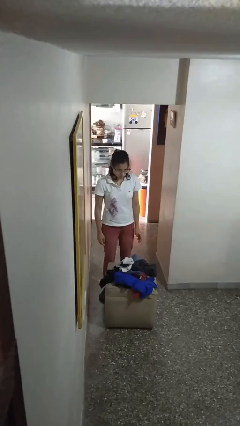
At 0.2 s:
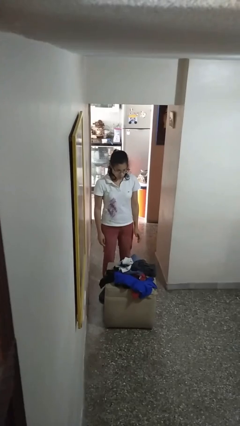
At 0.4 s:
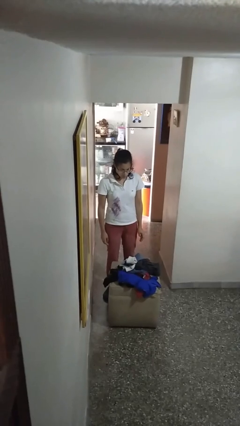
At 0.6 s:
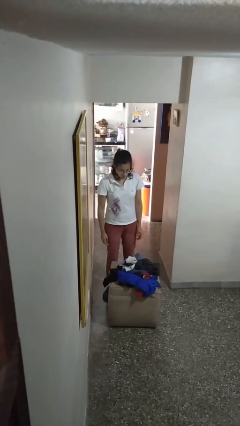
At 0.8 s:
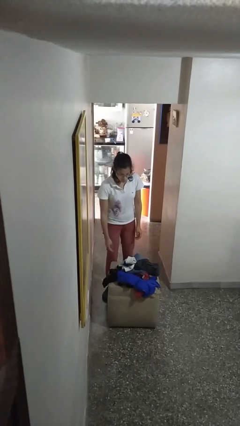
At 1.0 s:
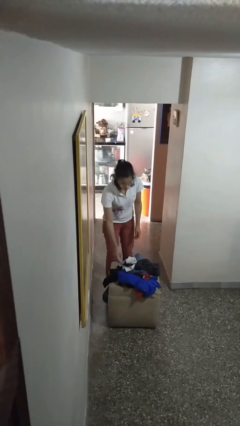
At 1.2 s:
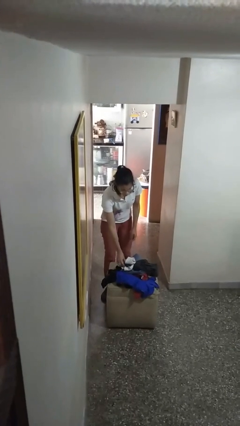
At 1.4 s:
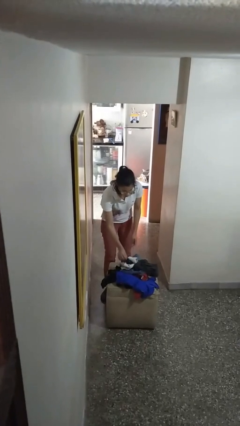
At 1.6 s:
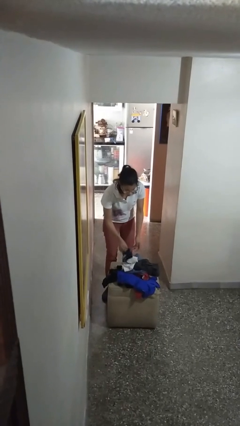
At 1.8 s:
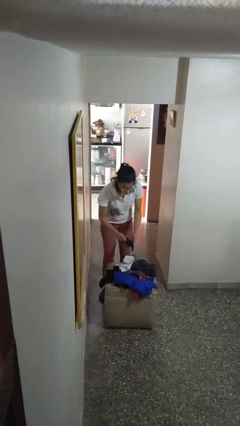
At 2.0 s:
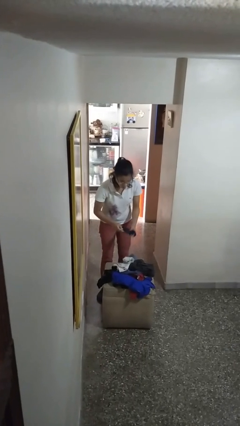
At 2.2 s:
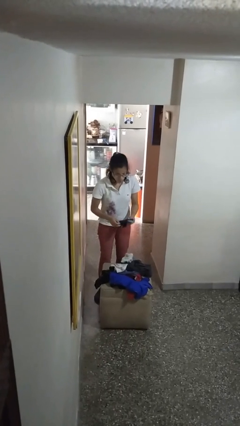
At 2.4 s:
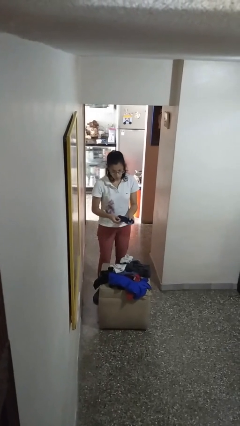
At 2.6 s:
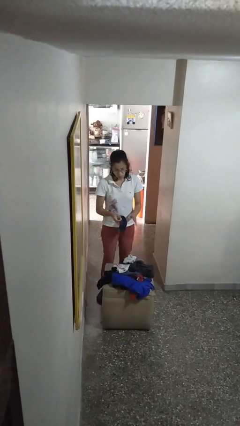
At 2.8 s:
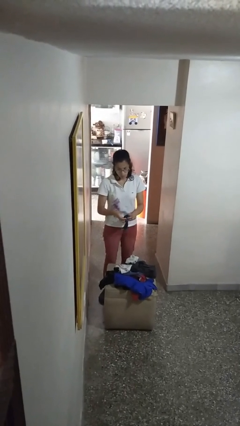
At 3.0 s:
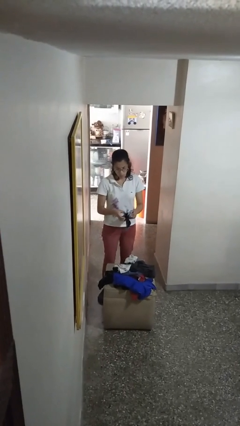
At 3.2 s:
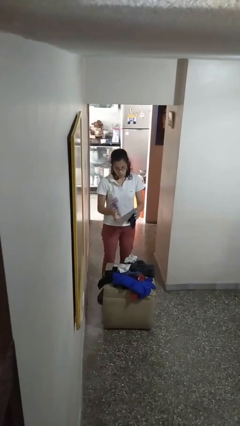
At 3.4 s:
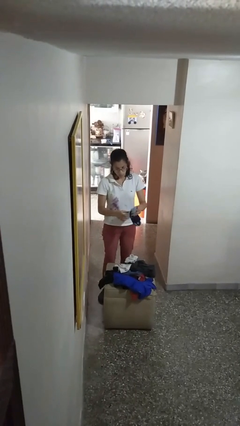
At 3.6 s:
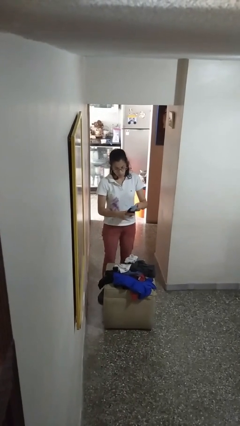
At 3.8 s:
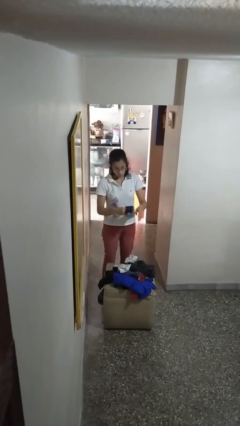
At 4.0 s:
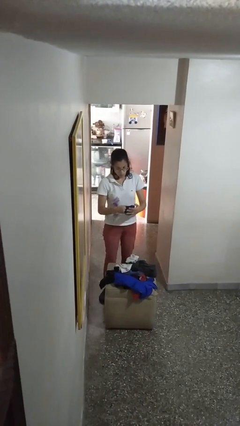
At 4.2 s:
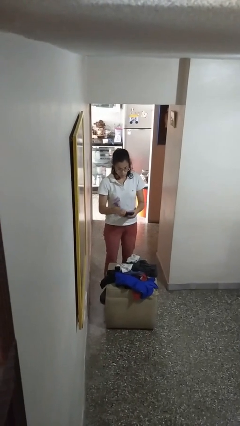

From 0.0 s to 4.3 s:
person folds socks

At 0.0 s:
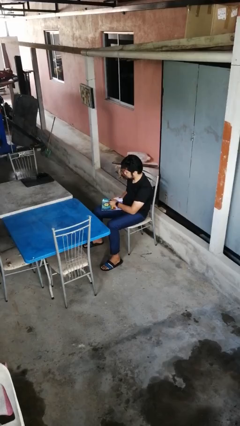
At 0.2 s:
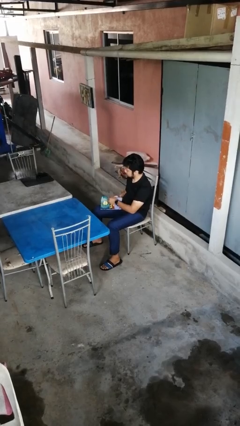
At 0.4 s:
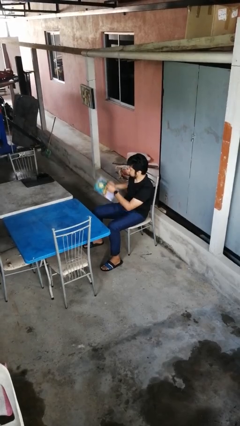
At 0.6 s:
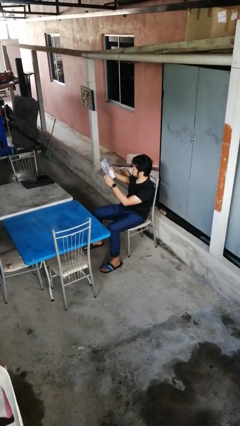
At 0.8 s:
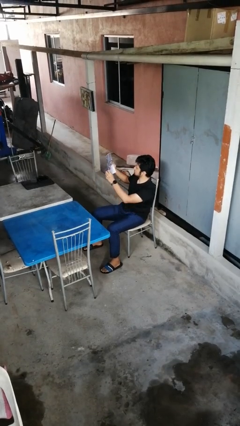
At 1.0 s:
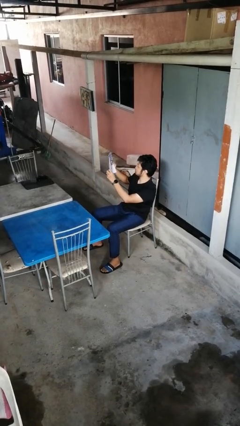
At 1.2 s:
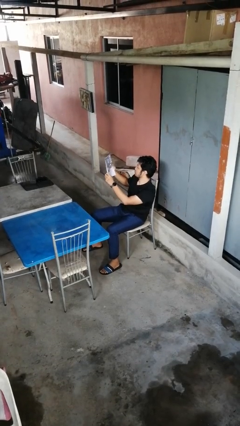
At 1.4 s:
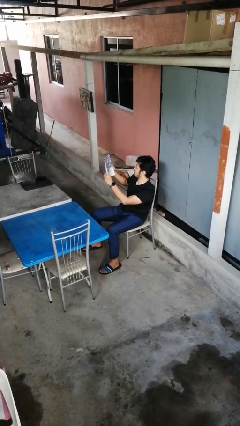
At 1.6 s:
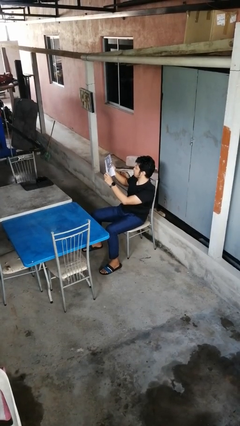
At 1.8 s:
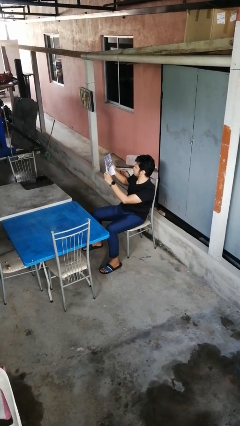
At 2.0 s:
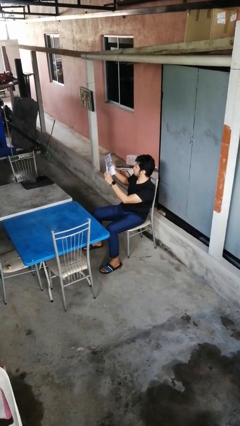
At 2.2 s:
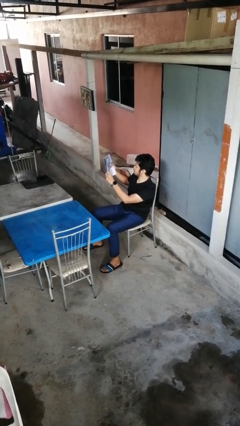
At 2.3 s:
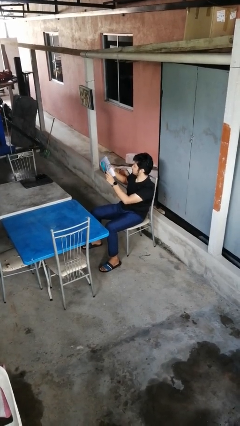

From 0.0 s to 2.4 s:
person reads magazine

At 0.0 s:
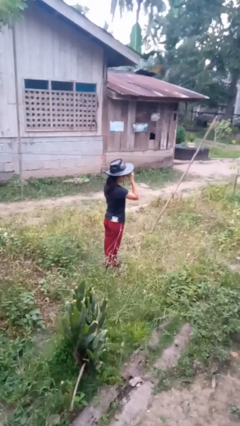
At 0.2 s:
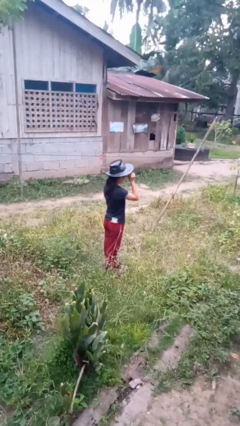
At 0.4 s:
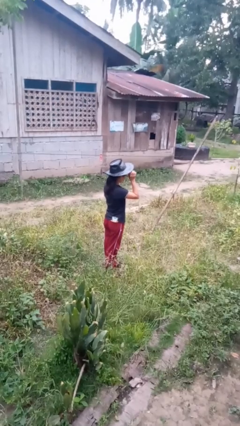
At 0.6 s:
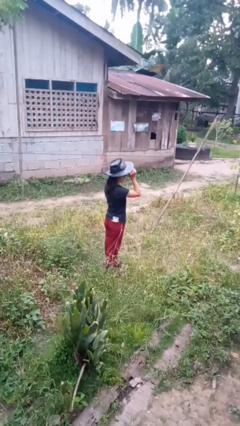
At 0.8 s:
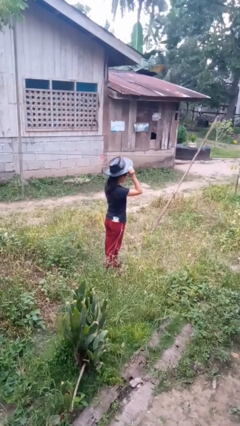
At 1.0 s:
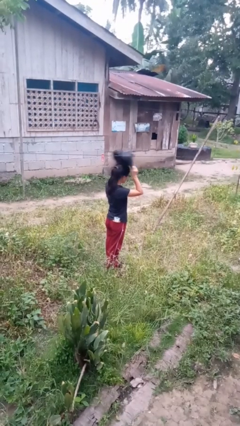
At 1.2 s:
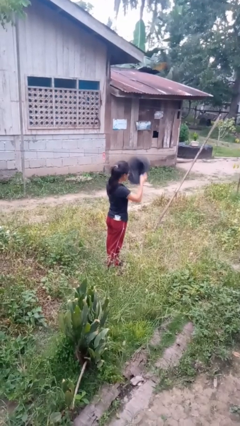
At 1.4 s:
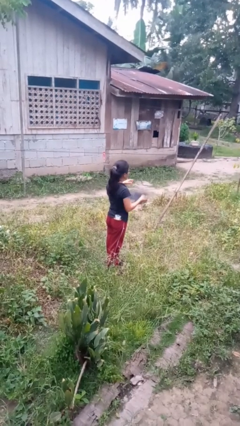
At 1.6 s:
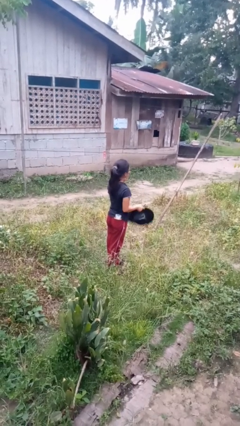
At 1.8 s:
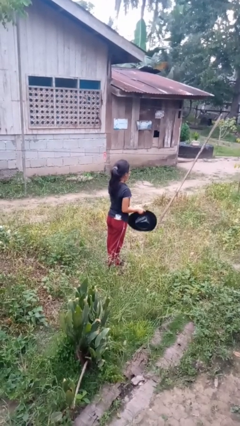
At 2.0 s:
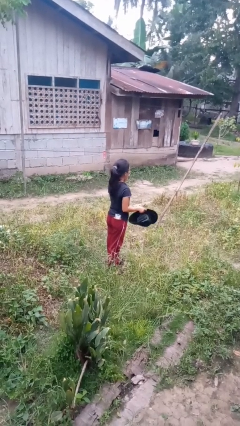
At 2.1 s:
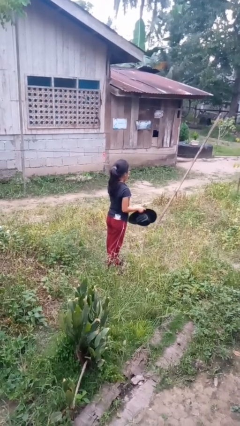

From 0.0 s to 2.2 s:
person takes off hat

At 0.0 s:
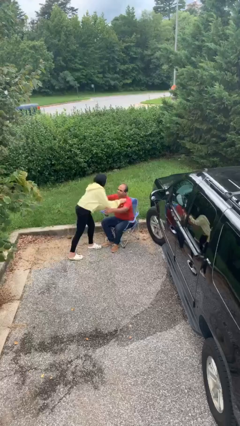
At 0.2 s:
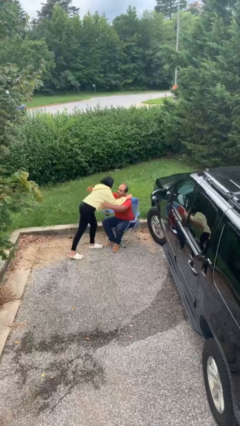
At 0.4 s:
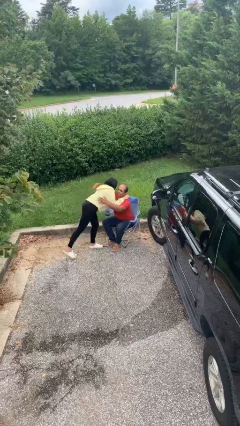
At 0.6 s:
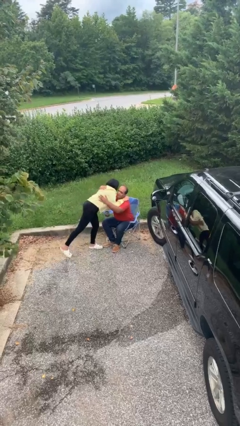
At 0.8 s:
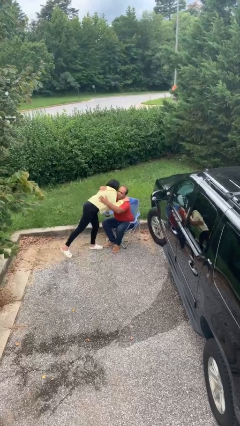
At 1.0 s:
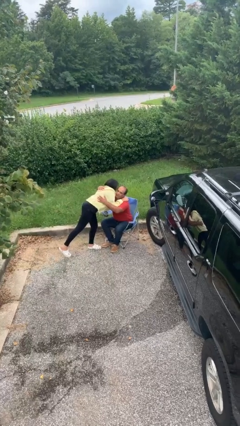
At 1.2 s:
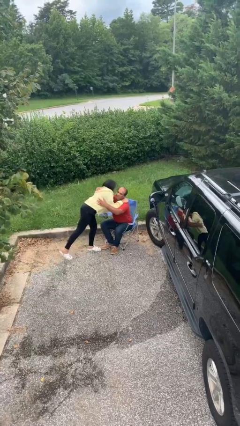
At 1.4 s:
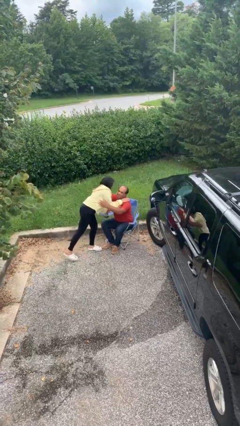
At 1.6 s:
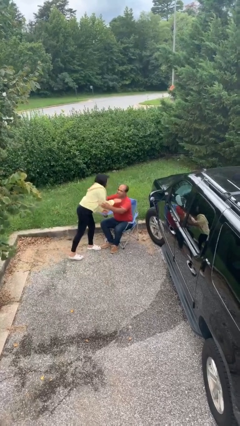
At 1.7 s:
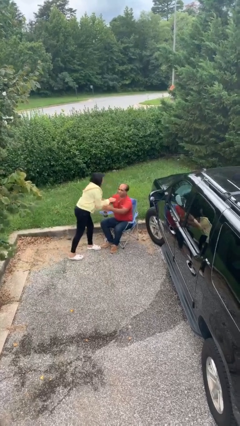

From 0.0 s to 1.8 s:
person embraces person

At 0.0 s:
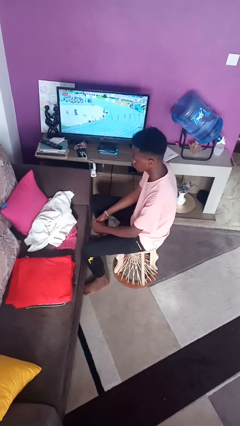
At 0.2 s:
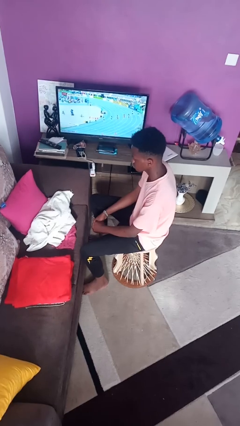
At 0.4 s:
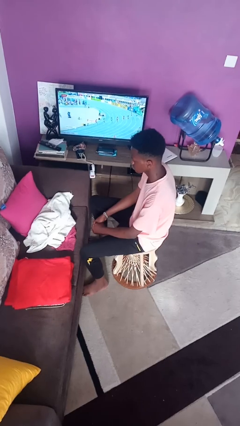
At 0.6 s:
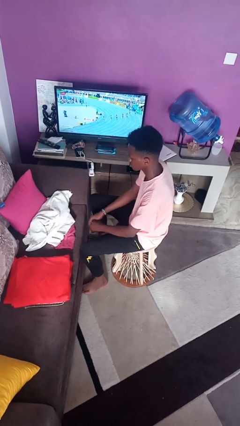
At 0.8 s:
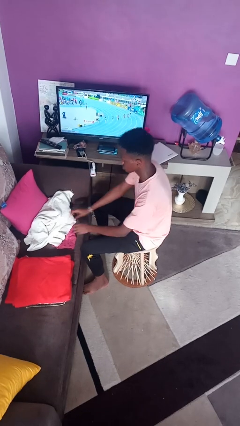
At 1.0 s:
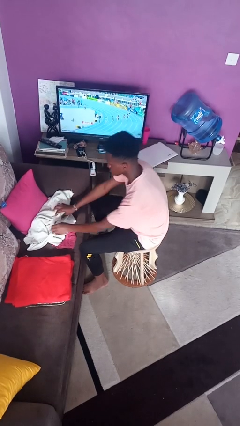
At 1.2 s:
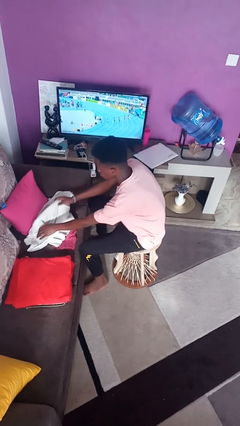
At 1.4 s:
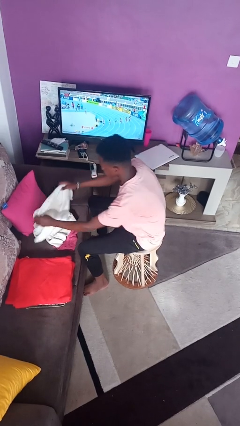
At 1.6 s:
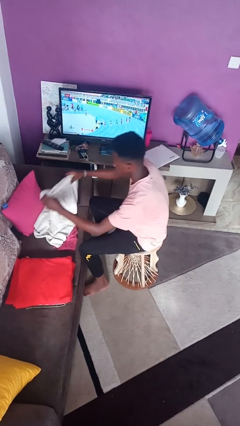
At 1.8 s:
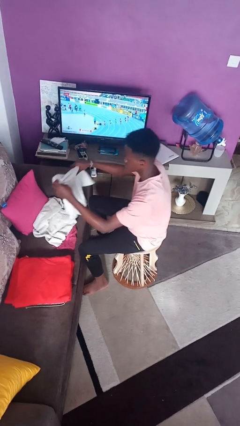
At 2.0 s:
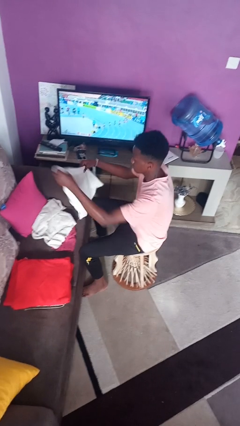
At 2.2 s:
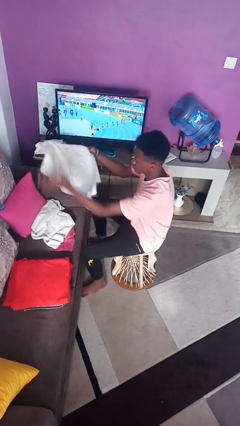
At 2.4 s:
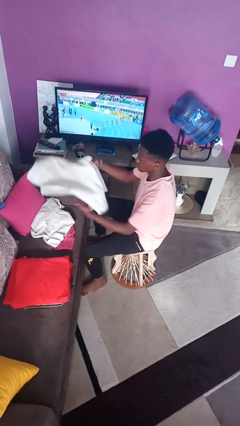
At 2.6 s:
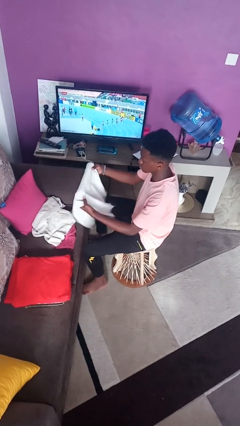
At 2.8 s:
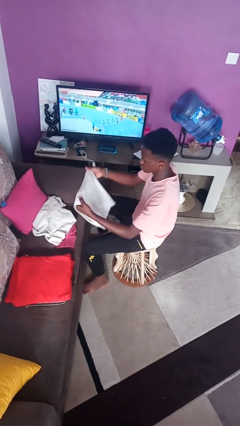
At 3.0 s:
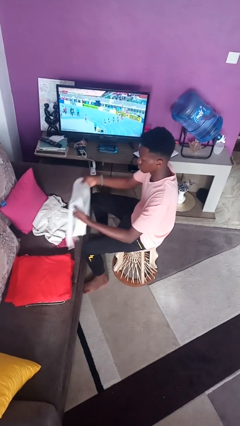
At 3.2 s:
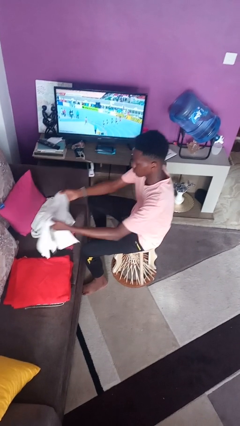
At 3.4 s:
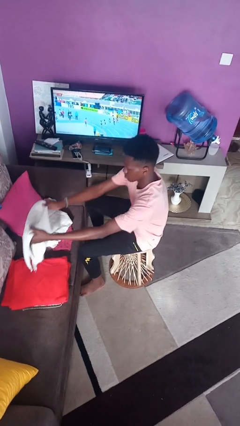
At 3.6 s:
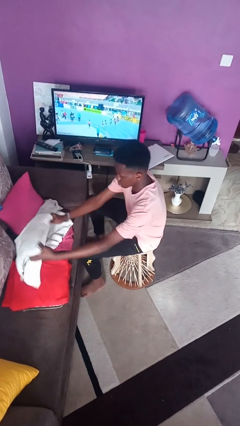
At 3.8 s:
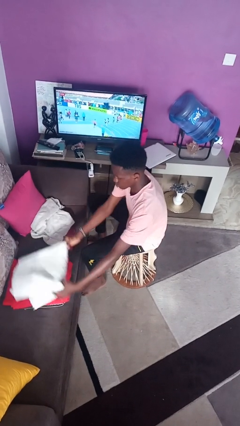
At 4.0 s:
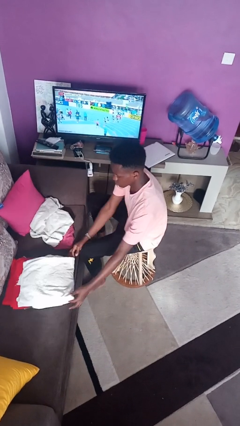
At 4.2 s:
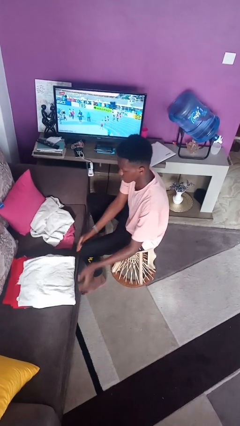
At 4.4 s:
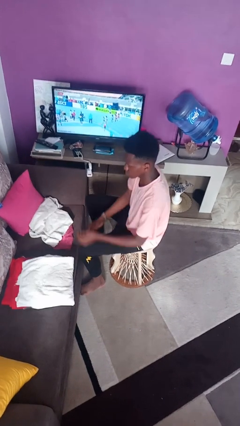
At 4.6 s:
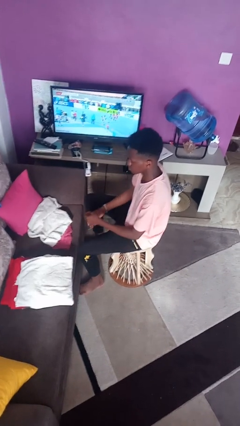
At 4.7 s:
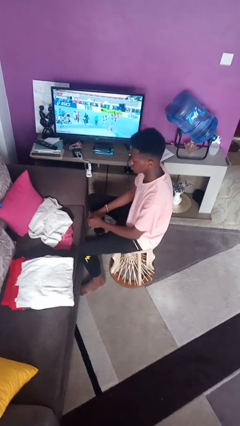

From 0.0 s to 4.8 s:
person folds towel

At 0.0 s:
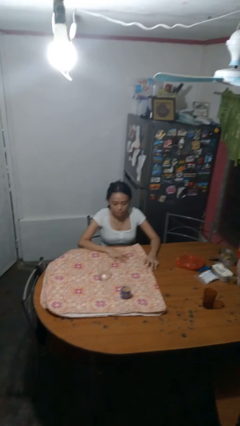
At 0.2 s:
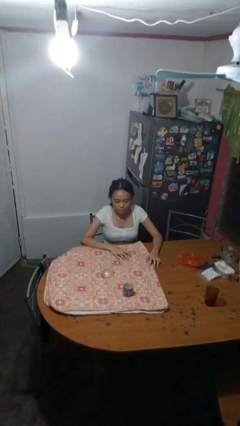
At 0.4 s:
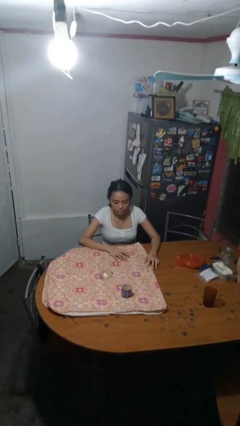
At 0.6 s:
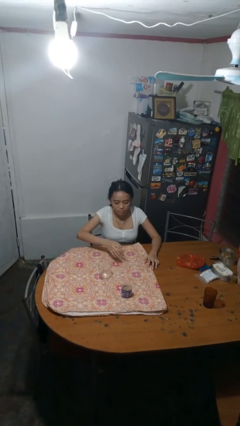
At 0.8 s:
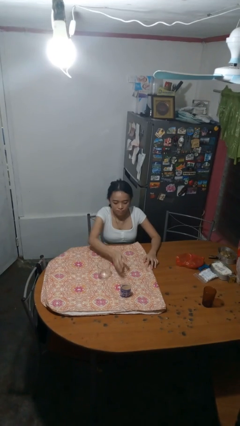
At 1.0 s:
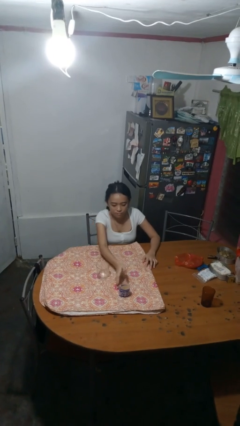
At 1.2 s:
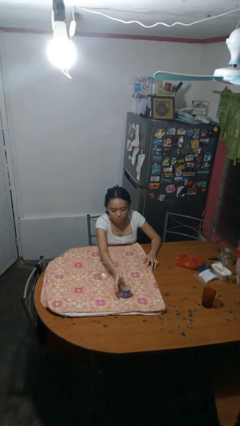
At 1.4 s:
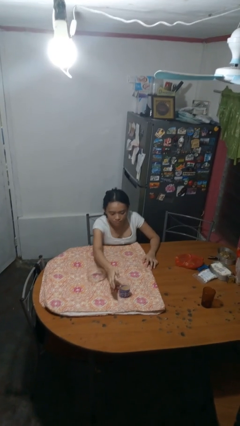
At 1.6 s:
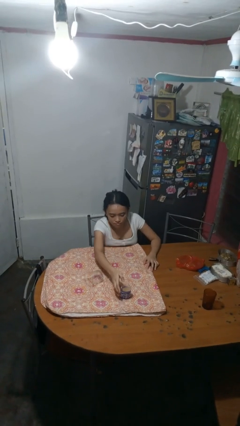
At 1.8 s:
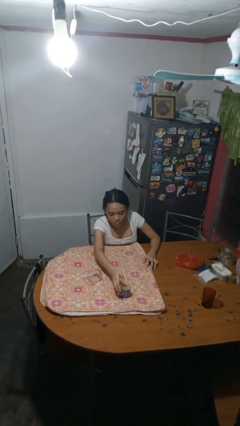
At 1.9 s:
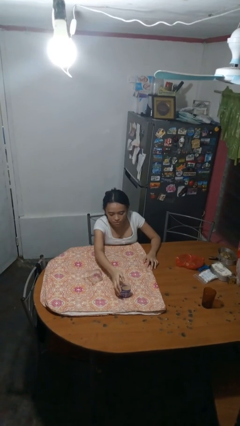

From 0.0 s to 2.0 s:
person knocks over glass
